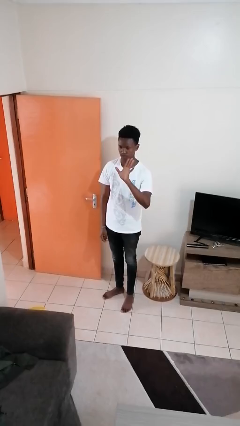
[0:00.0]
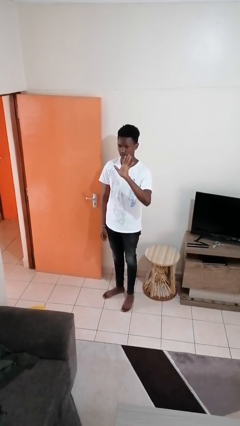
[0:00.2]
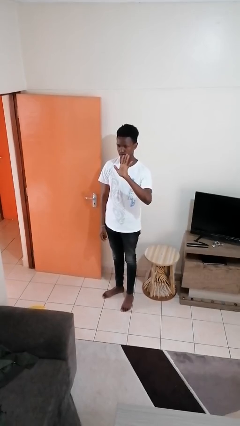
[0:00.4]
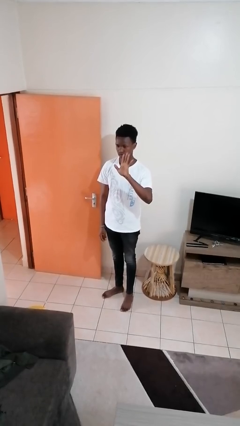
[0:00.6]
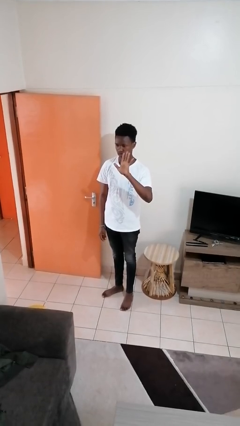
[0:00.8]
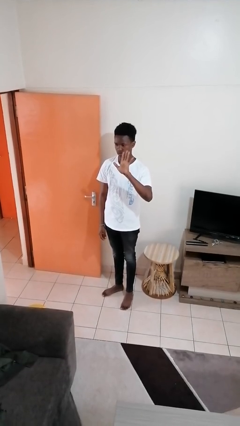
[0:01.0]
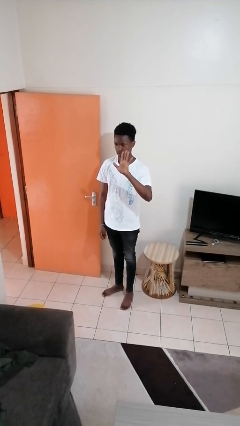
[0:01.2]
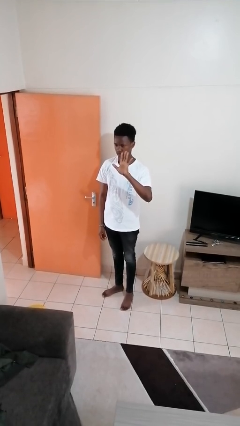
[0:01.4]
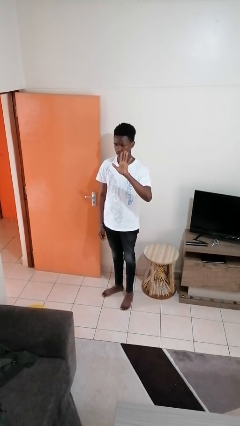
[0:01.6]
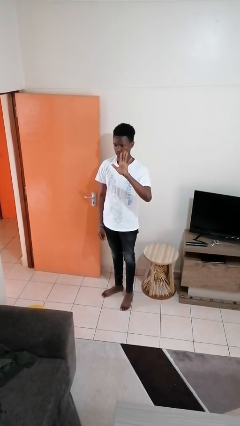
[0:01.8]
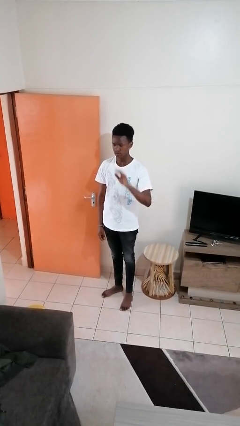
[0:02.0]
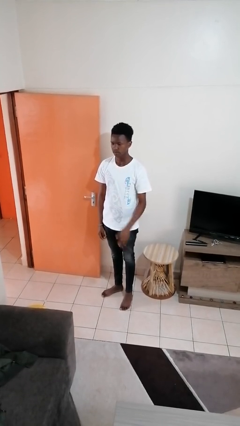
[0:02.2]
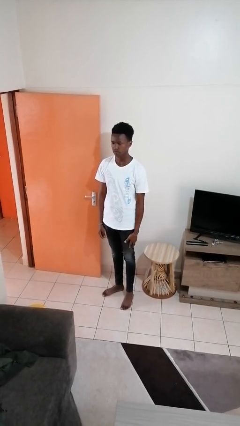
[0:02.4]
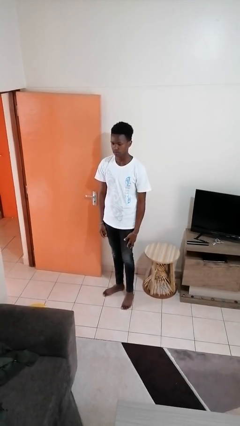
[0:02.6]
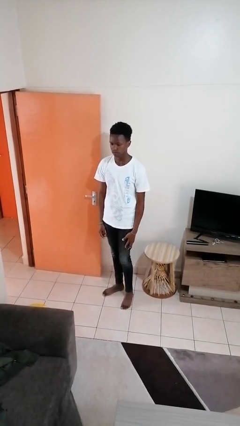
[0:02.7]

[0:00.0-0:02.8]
person gestures number five

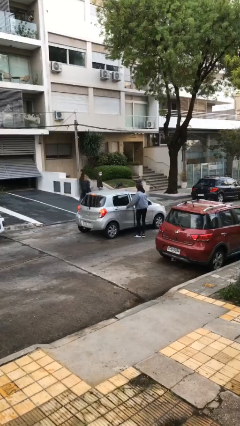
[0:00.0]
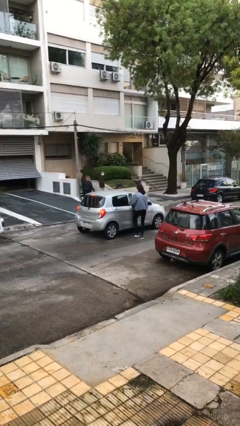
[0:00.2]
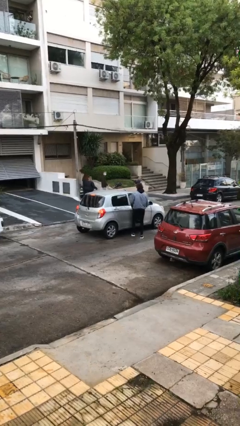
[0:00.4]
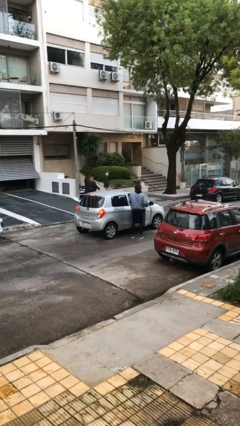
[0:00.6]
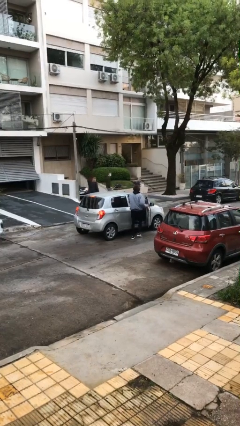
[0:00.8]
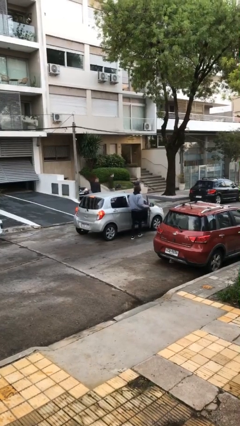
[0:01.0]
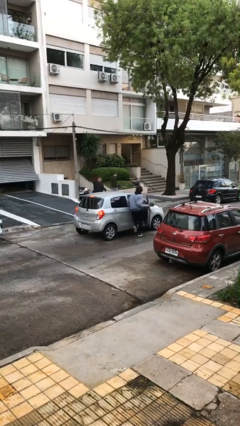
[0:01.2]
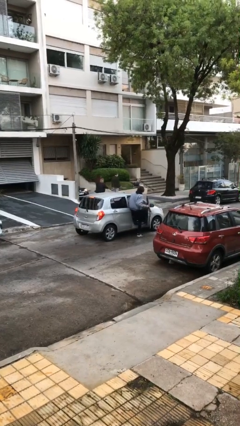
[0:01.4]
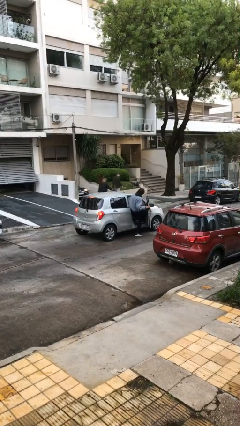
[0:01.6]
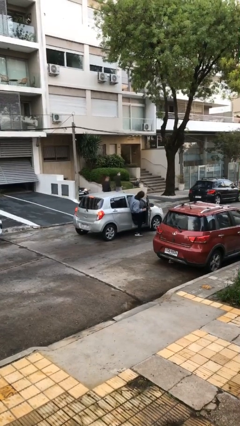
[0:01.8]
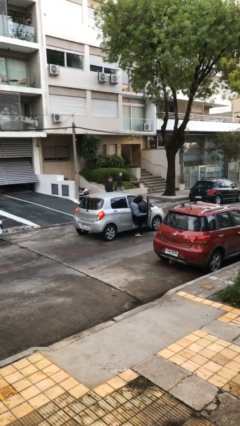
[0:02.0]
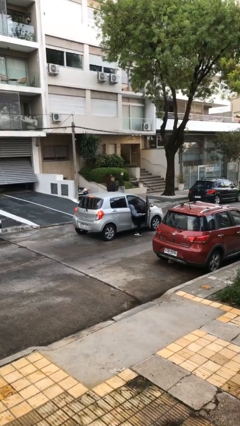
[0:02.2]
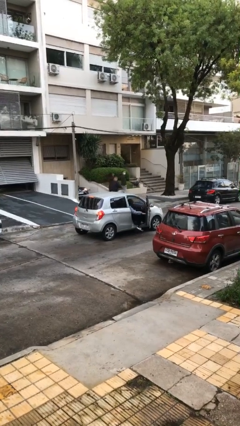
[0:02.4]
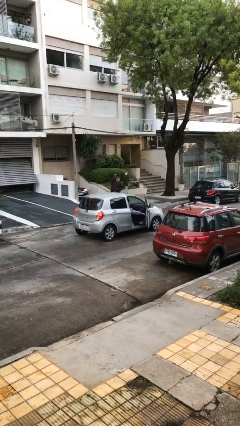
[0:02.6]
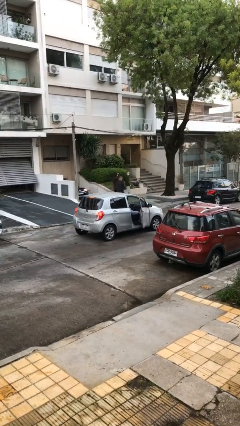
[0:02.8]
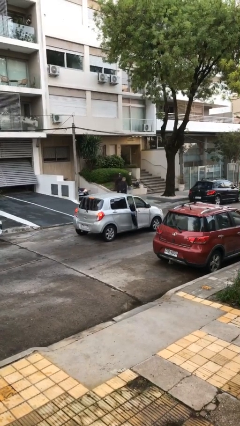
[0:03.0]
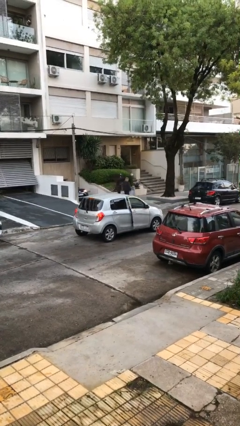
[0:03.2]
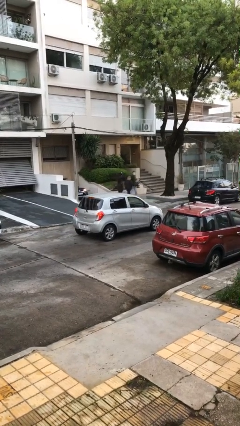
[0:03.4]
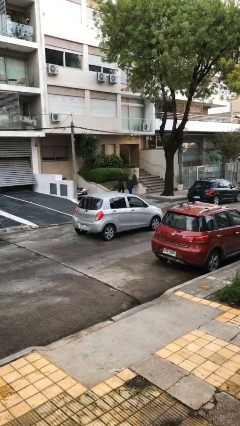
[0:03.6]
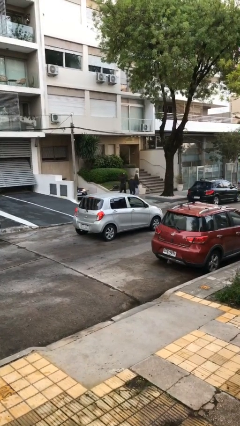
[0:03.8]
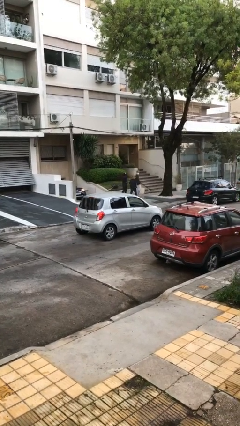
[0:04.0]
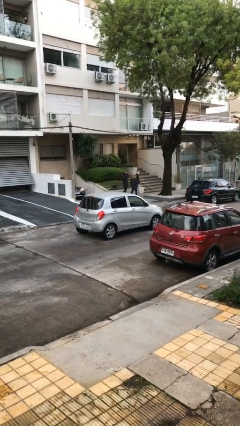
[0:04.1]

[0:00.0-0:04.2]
car picks up person

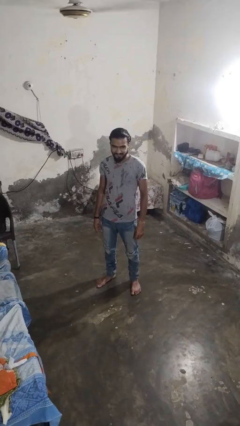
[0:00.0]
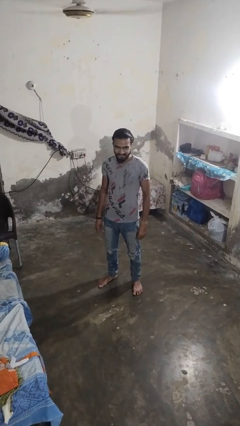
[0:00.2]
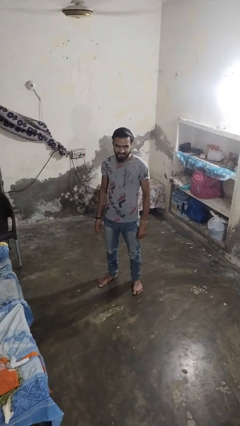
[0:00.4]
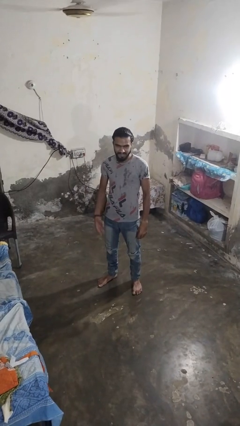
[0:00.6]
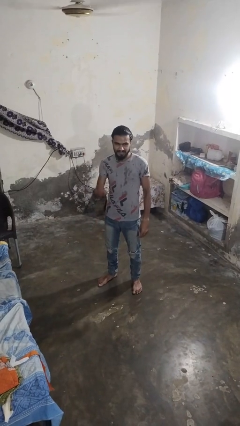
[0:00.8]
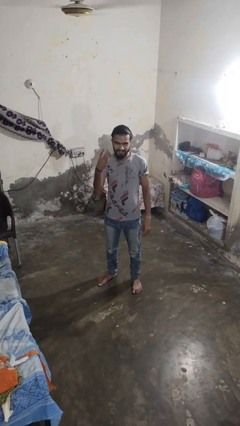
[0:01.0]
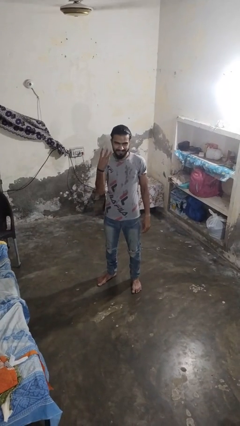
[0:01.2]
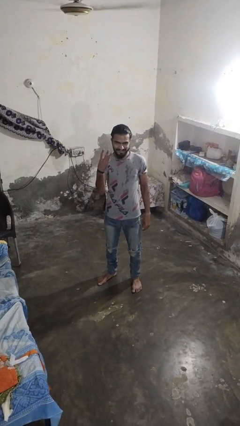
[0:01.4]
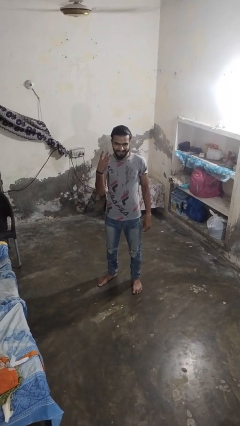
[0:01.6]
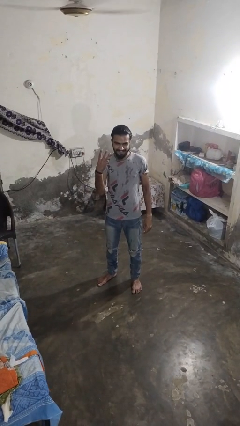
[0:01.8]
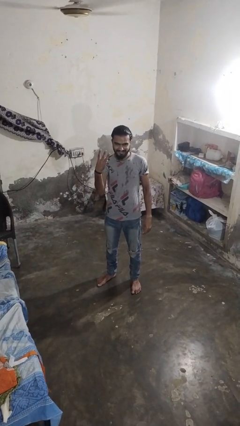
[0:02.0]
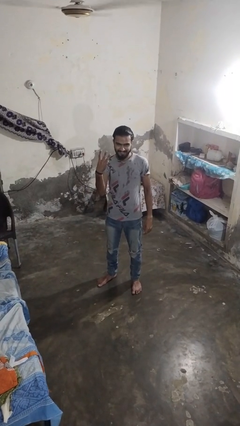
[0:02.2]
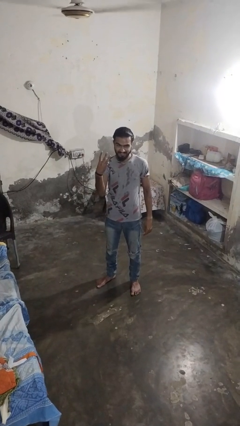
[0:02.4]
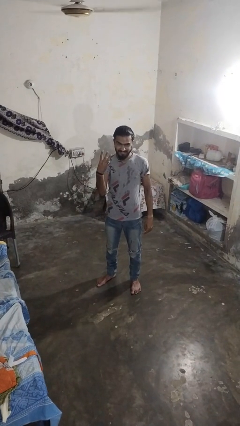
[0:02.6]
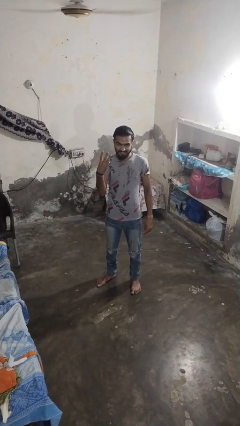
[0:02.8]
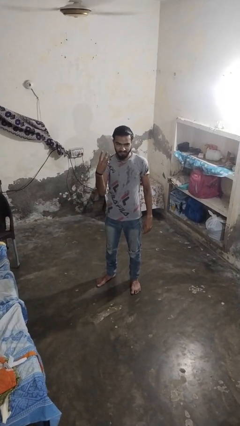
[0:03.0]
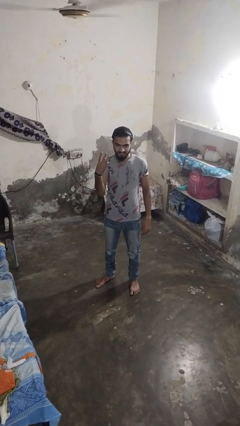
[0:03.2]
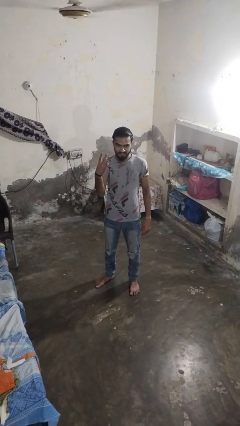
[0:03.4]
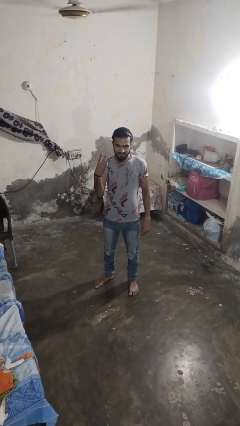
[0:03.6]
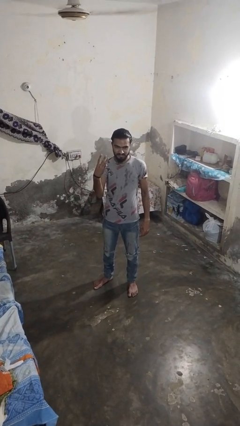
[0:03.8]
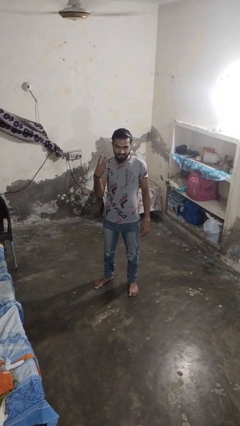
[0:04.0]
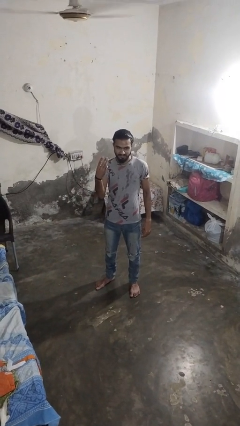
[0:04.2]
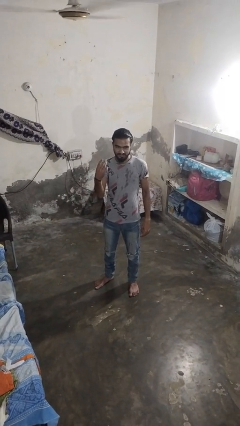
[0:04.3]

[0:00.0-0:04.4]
person gestures number three

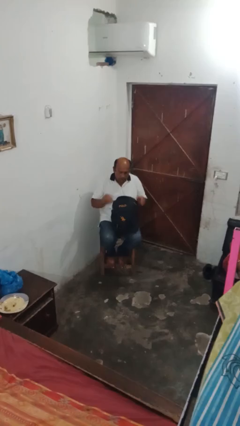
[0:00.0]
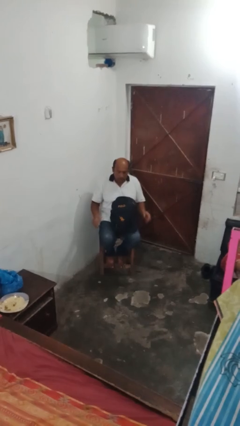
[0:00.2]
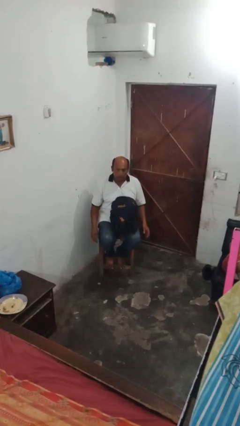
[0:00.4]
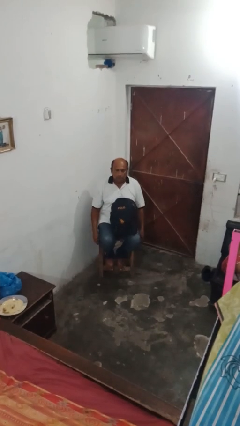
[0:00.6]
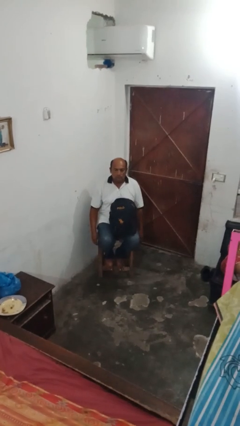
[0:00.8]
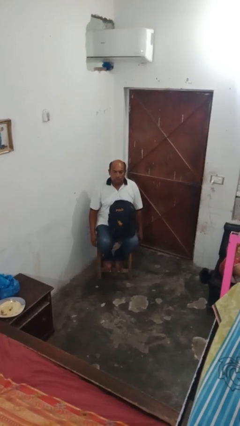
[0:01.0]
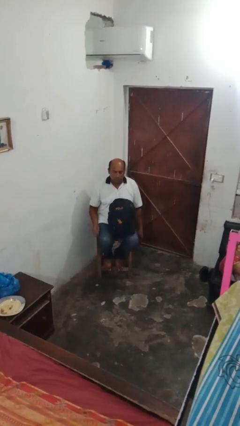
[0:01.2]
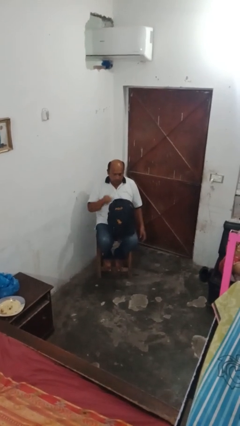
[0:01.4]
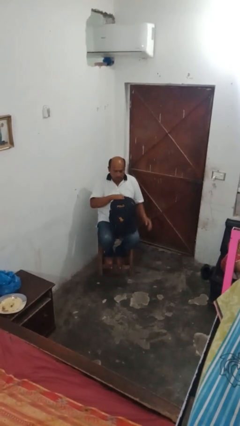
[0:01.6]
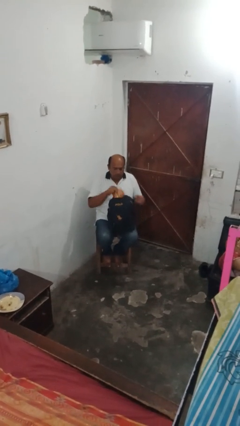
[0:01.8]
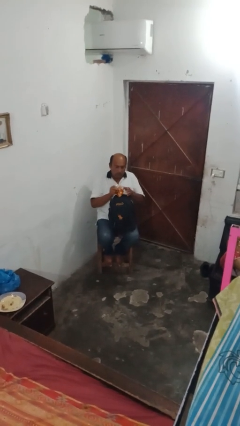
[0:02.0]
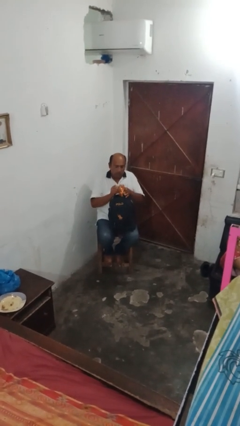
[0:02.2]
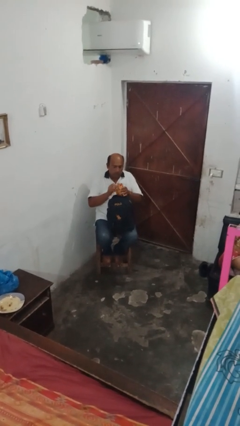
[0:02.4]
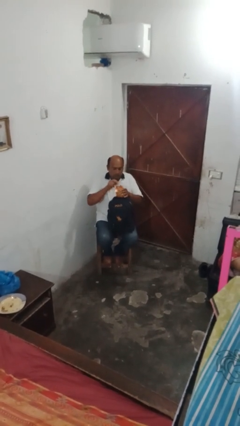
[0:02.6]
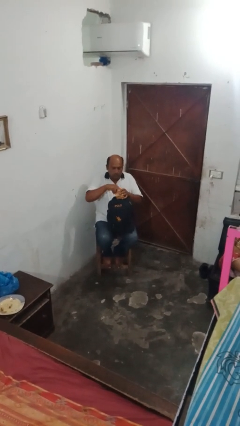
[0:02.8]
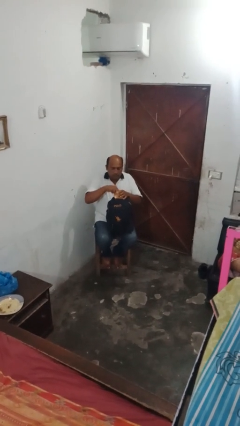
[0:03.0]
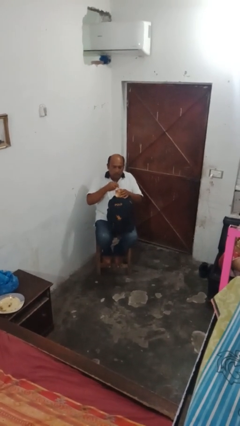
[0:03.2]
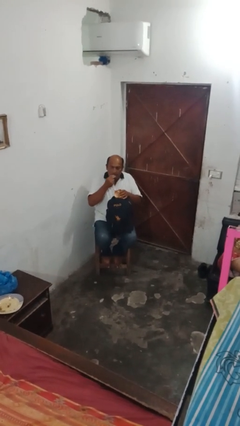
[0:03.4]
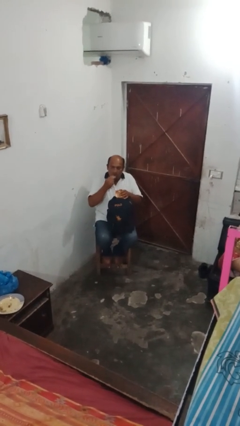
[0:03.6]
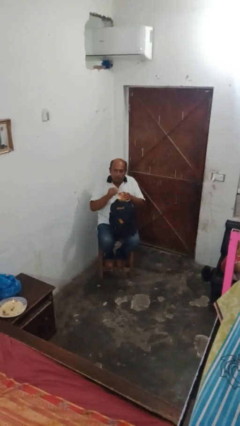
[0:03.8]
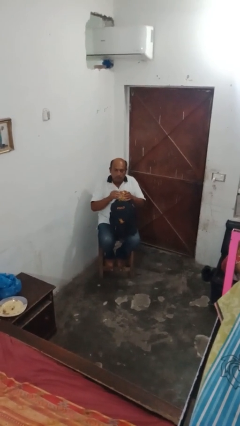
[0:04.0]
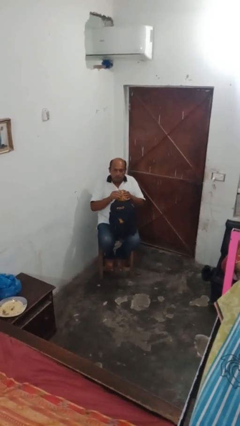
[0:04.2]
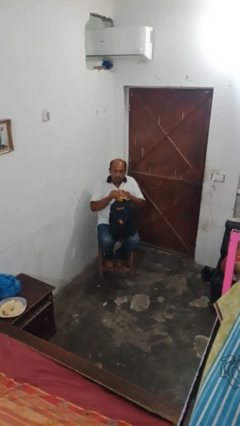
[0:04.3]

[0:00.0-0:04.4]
person eats snack from bag

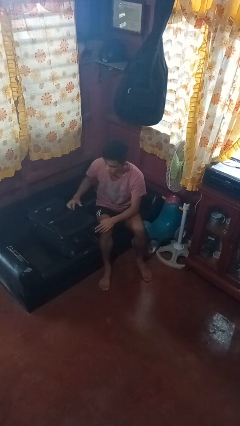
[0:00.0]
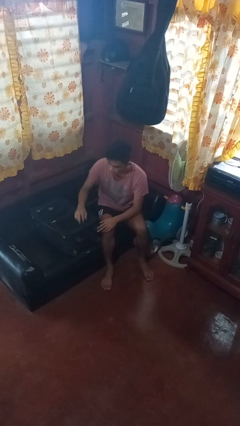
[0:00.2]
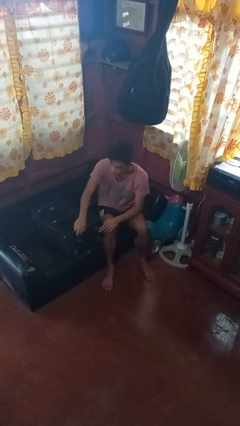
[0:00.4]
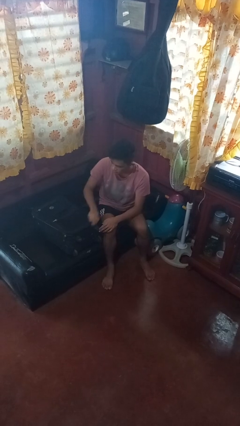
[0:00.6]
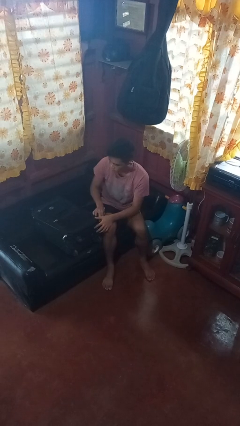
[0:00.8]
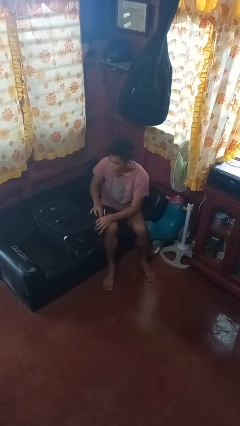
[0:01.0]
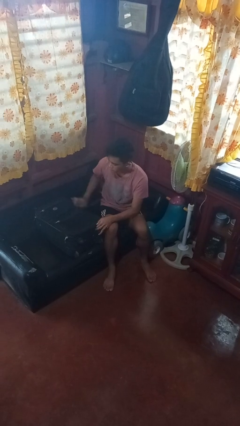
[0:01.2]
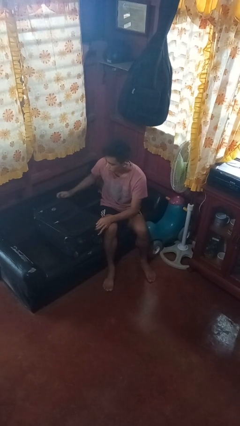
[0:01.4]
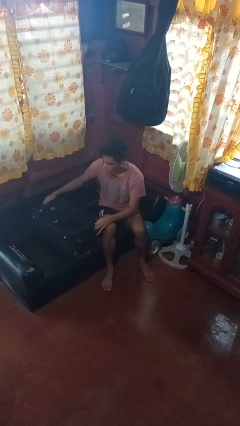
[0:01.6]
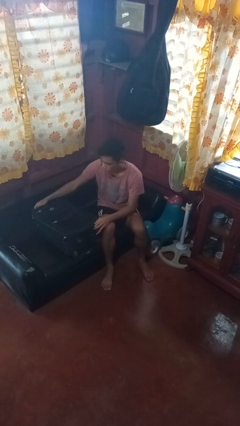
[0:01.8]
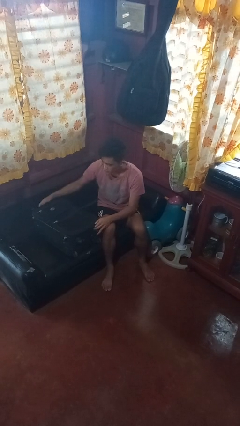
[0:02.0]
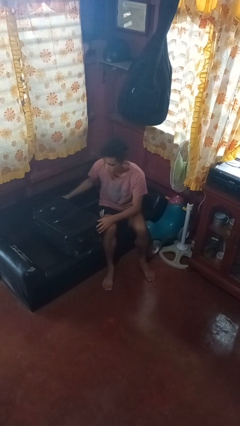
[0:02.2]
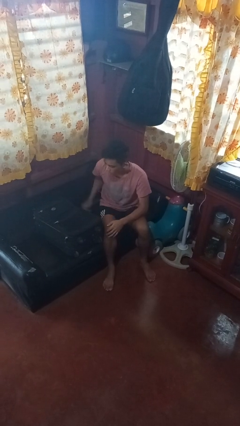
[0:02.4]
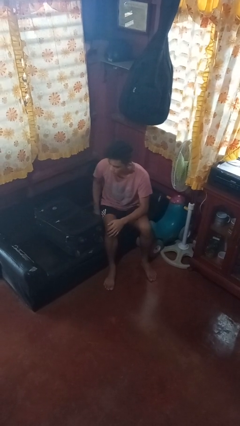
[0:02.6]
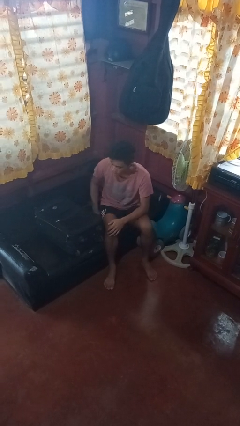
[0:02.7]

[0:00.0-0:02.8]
person closes suitcase
